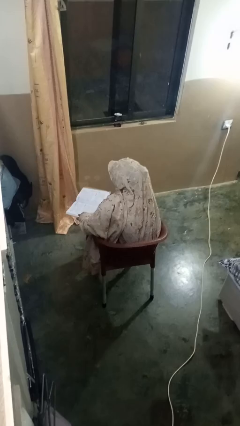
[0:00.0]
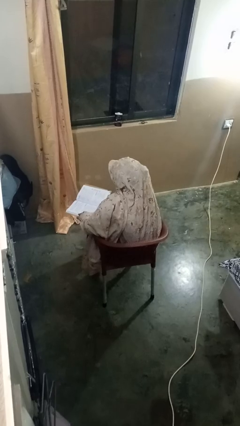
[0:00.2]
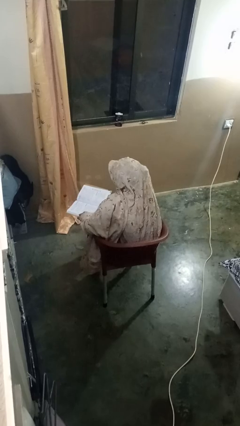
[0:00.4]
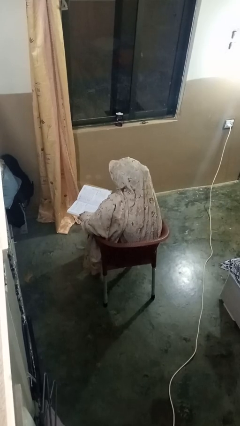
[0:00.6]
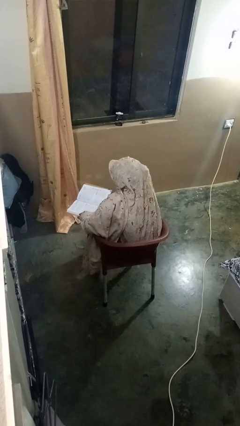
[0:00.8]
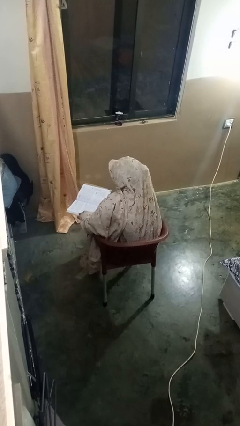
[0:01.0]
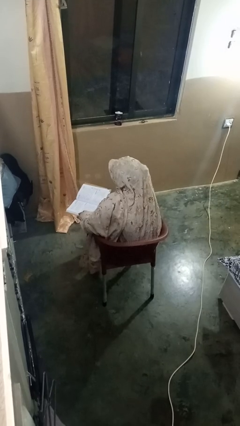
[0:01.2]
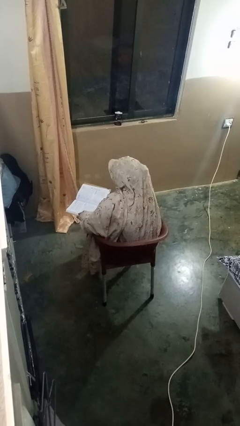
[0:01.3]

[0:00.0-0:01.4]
person reads book

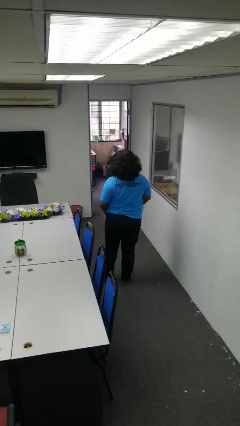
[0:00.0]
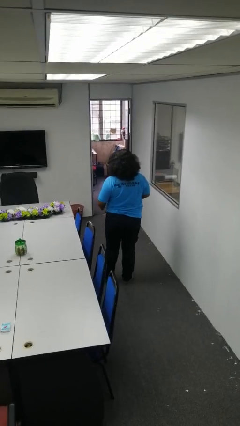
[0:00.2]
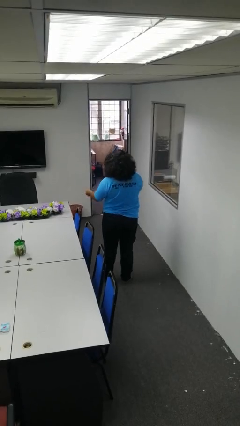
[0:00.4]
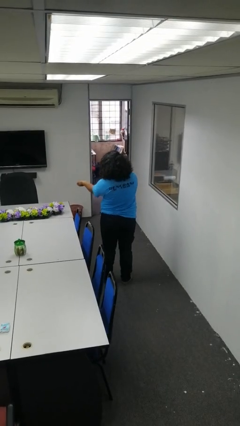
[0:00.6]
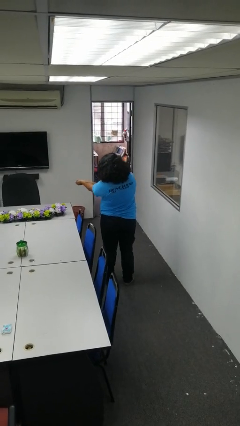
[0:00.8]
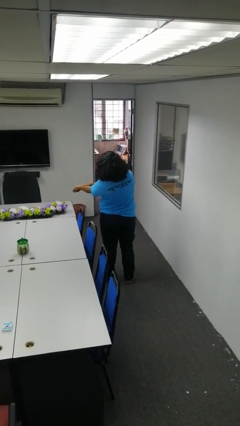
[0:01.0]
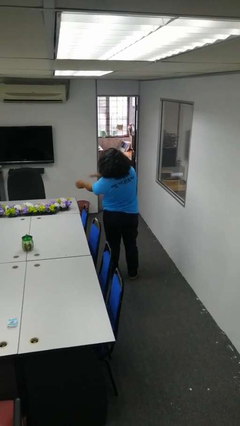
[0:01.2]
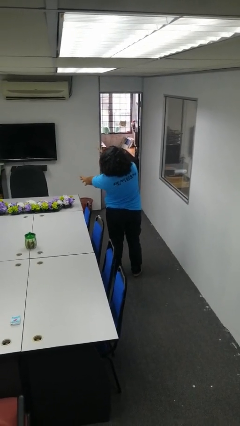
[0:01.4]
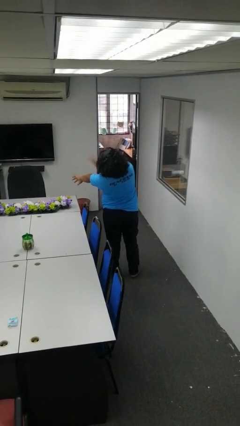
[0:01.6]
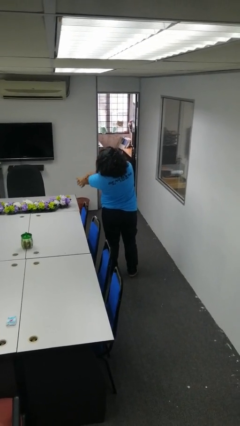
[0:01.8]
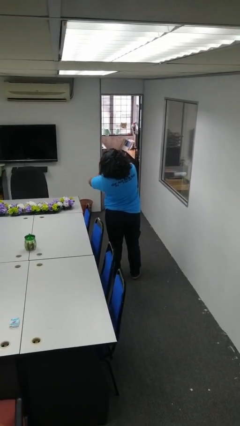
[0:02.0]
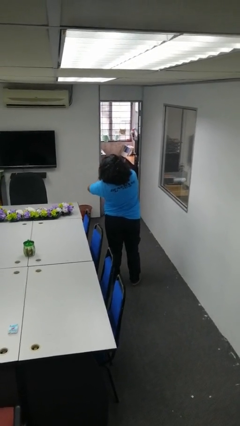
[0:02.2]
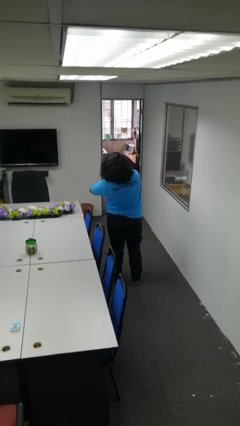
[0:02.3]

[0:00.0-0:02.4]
person swats bug

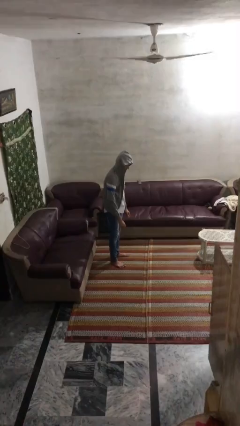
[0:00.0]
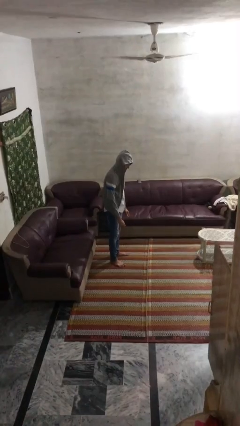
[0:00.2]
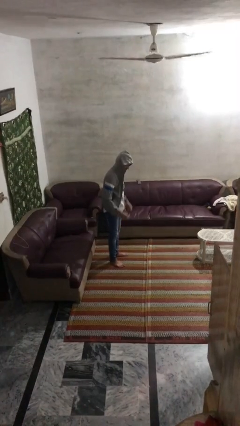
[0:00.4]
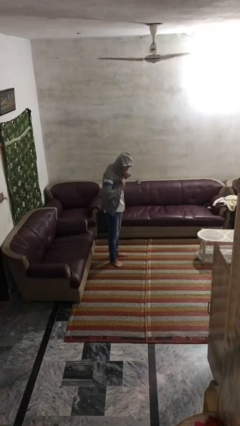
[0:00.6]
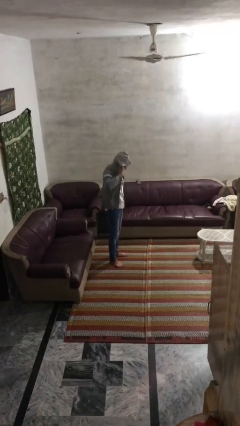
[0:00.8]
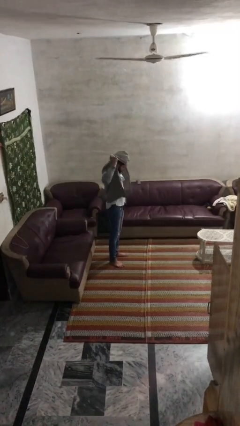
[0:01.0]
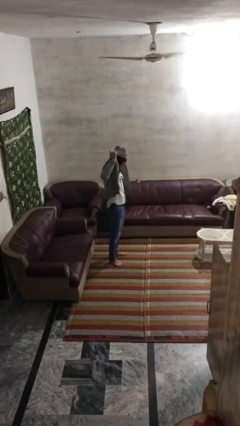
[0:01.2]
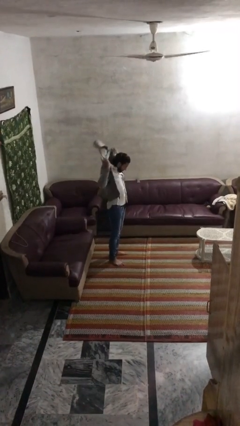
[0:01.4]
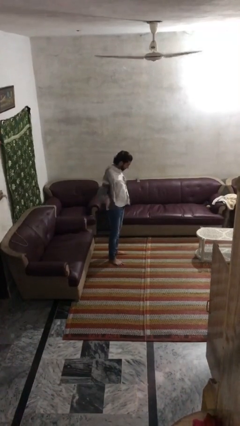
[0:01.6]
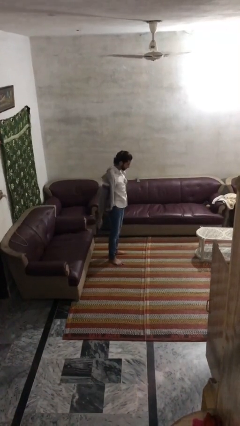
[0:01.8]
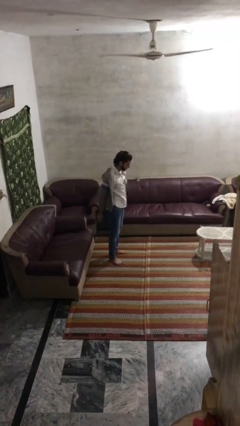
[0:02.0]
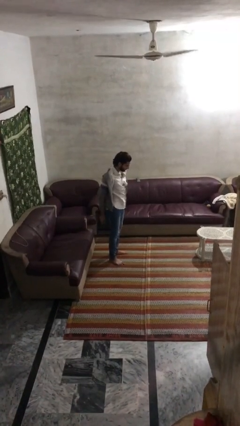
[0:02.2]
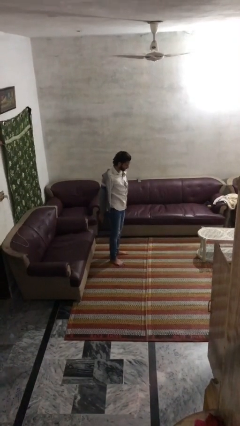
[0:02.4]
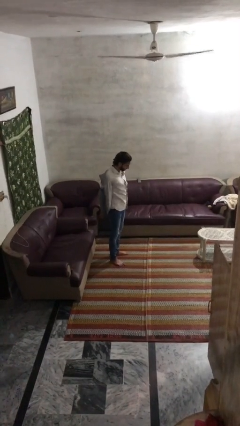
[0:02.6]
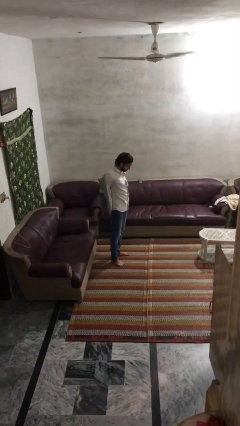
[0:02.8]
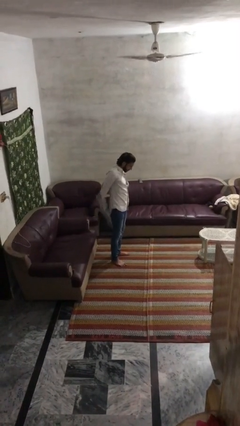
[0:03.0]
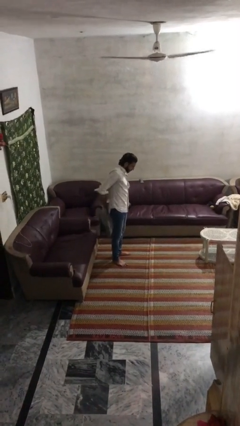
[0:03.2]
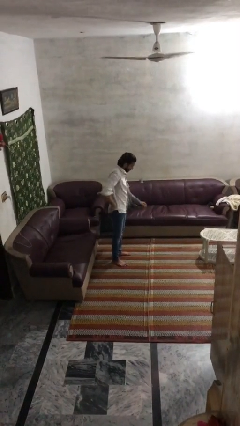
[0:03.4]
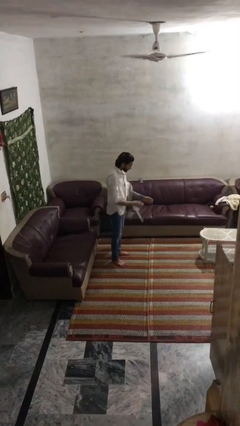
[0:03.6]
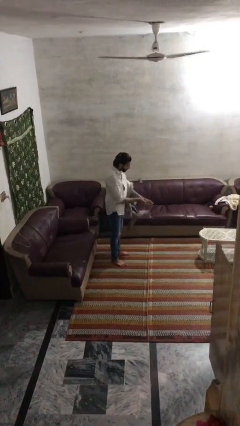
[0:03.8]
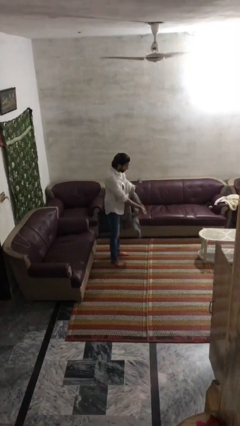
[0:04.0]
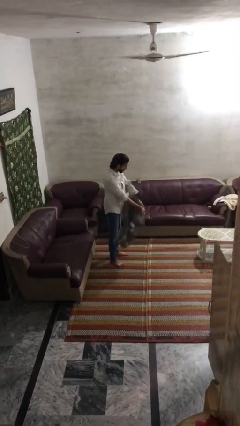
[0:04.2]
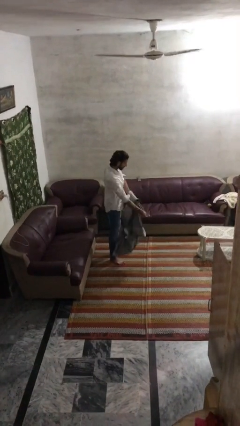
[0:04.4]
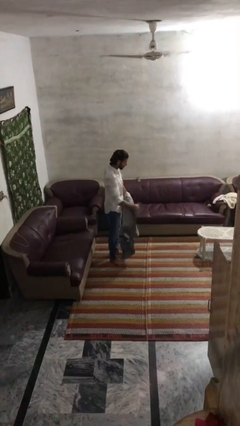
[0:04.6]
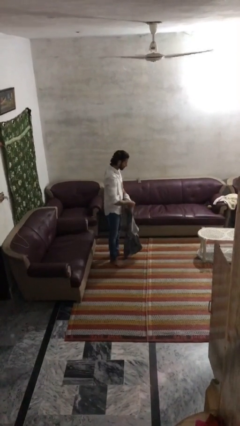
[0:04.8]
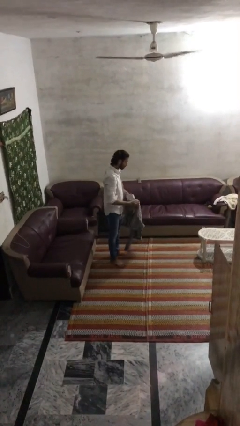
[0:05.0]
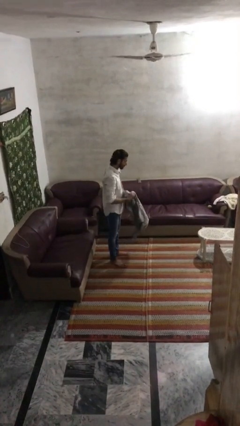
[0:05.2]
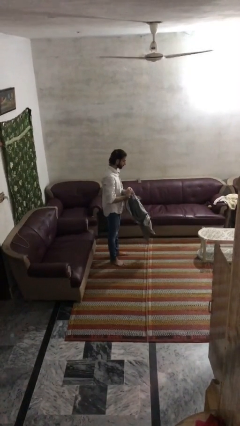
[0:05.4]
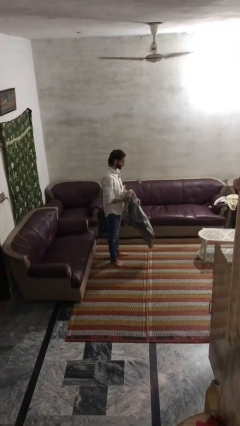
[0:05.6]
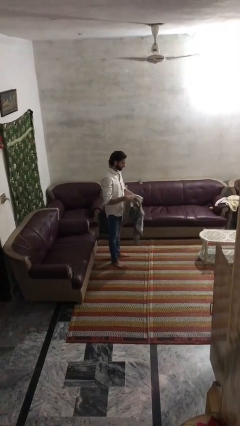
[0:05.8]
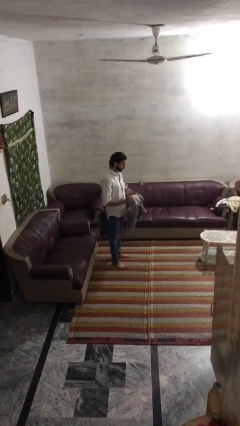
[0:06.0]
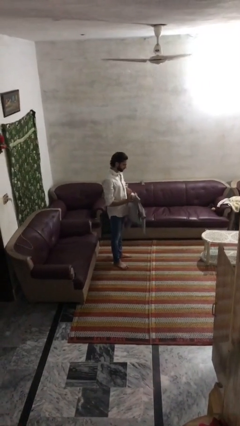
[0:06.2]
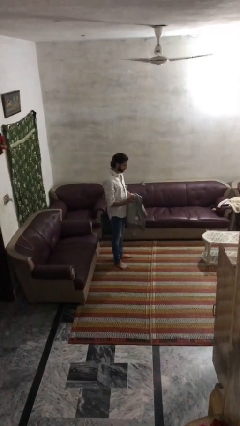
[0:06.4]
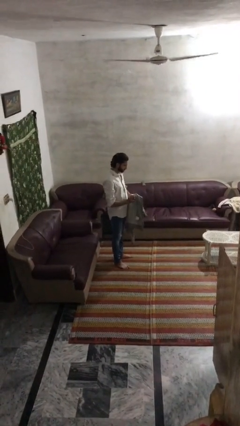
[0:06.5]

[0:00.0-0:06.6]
person takes off hoodie

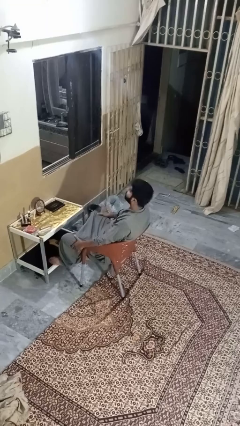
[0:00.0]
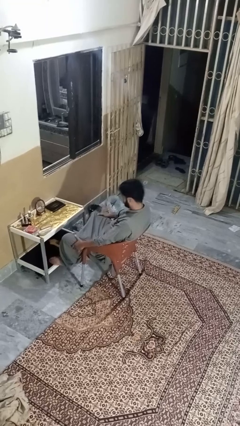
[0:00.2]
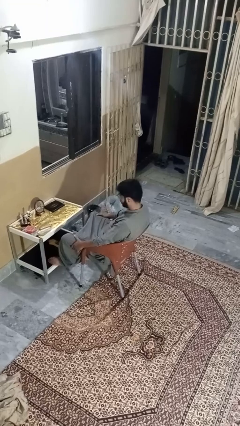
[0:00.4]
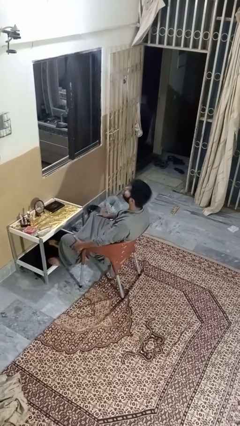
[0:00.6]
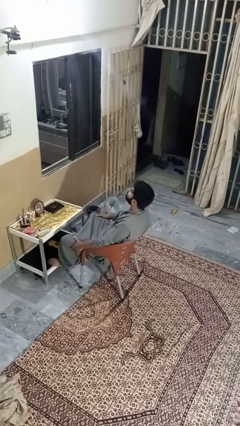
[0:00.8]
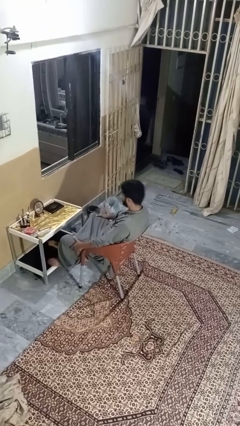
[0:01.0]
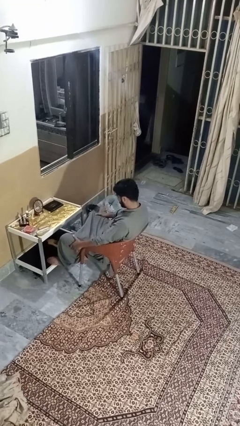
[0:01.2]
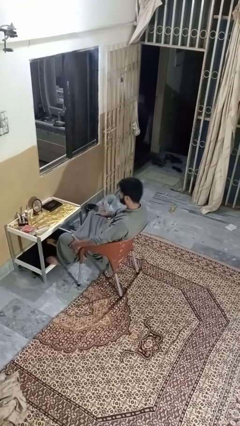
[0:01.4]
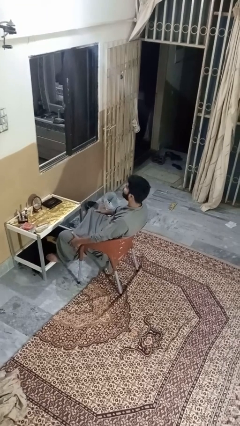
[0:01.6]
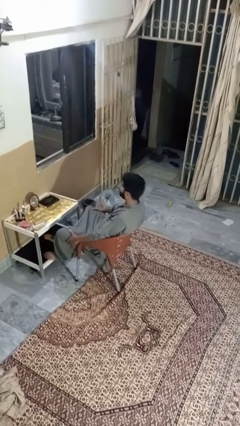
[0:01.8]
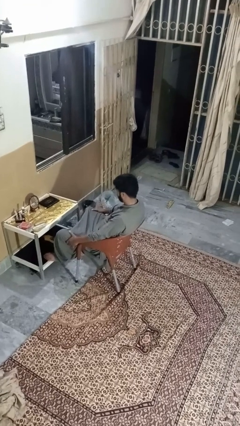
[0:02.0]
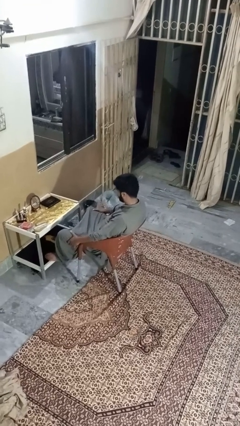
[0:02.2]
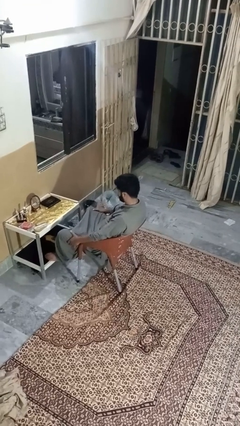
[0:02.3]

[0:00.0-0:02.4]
person nods head

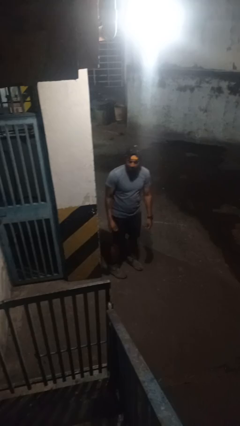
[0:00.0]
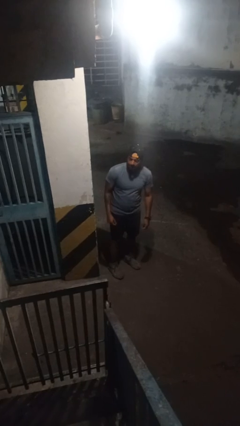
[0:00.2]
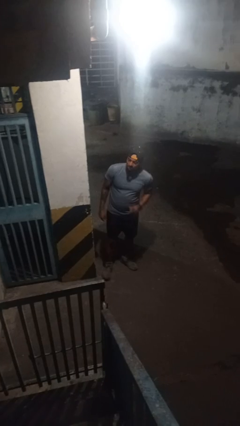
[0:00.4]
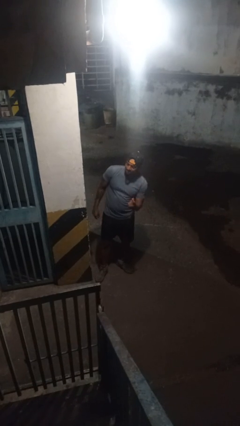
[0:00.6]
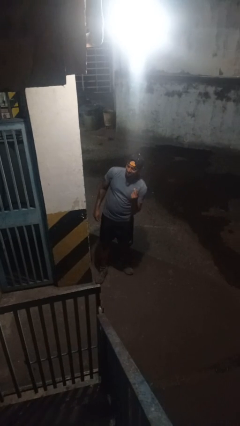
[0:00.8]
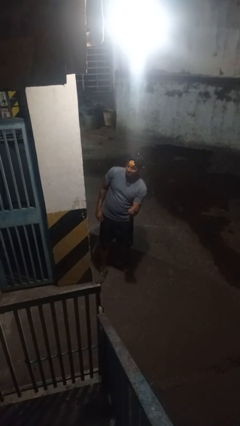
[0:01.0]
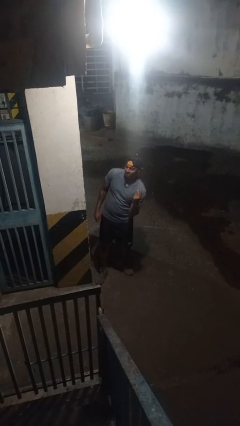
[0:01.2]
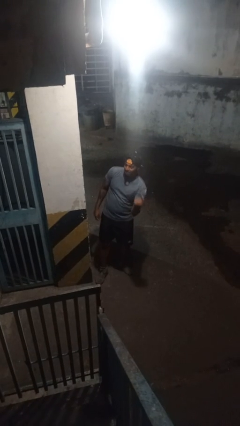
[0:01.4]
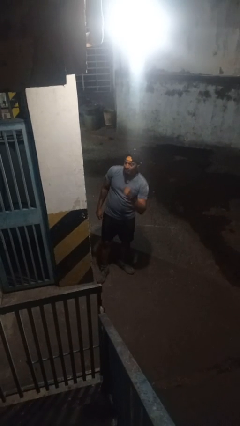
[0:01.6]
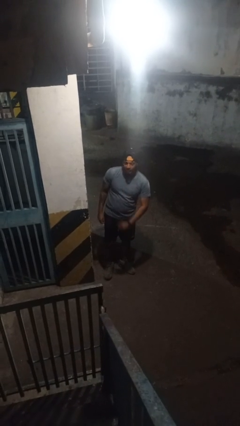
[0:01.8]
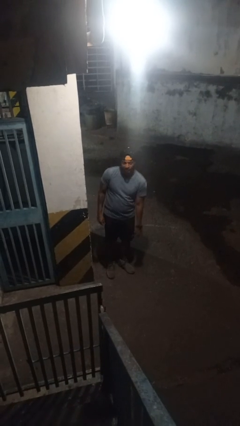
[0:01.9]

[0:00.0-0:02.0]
person snaps fingers

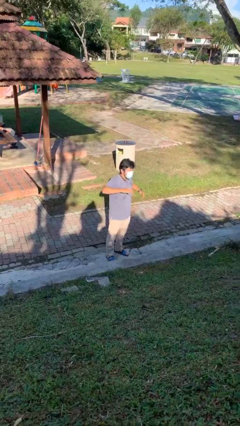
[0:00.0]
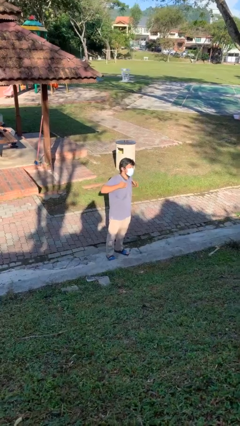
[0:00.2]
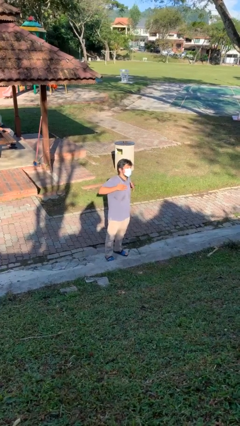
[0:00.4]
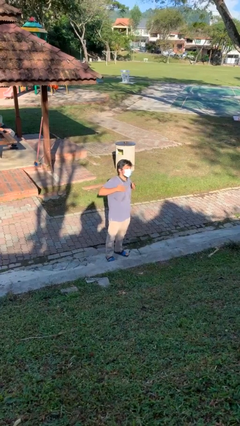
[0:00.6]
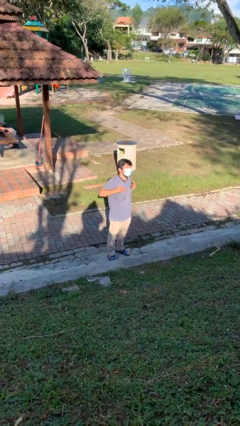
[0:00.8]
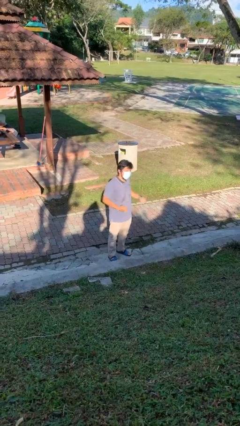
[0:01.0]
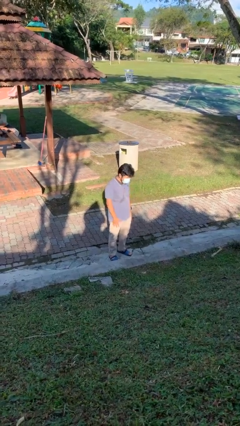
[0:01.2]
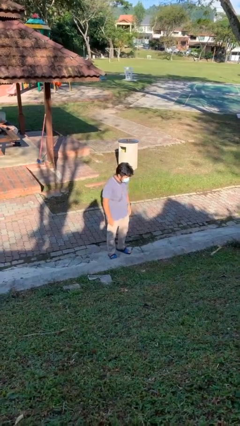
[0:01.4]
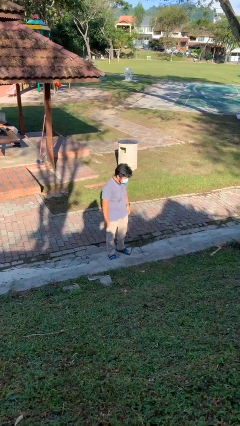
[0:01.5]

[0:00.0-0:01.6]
person drums on chest

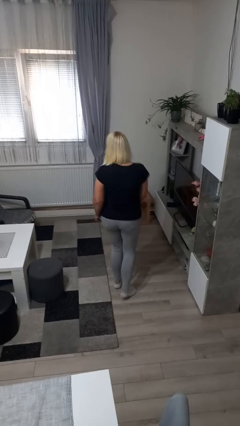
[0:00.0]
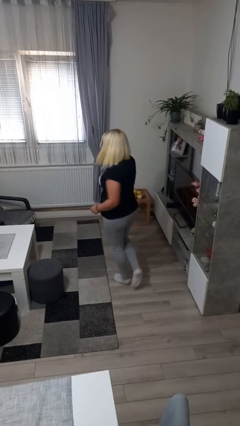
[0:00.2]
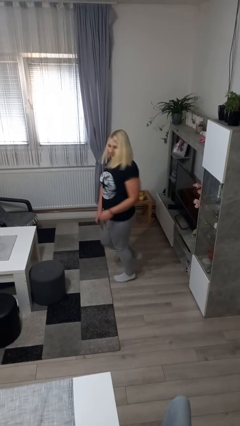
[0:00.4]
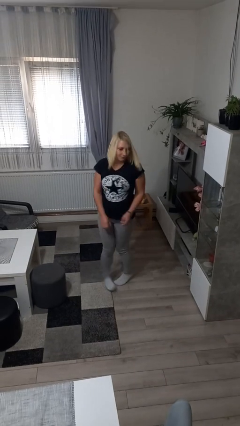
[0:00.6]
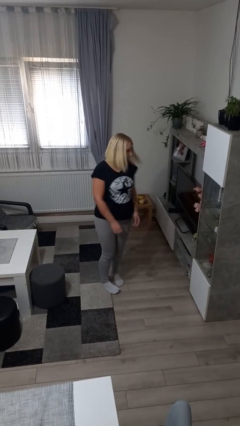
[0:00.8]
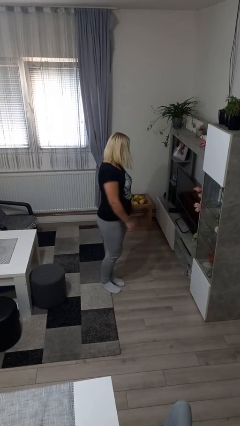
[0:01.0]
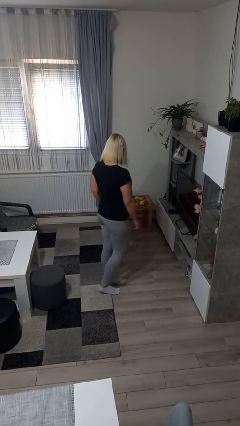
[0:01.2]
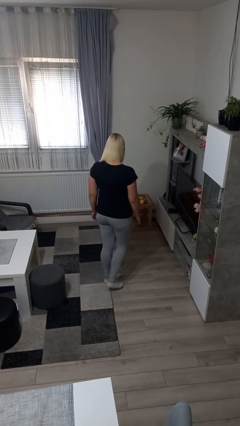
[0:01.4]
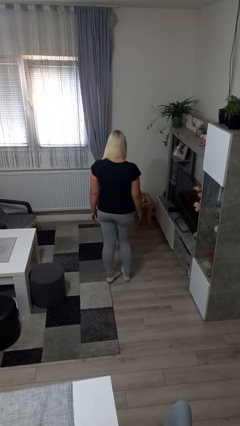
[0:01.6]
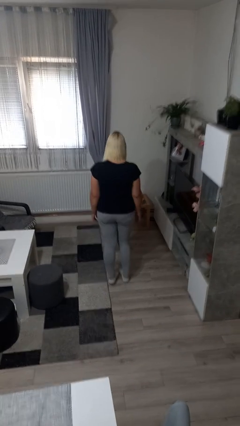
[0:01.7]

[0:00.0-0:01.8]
person twirls
